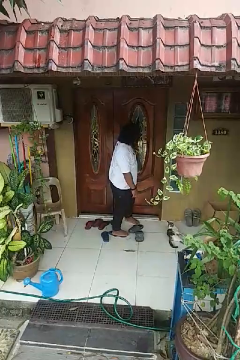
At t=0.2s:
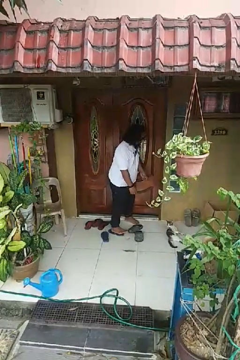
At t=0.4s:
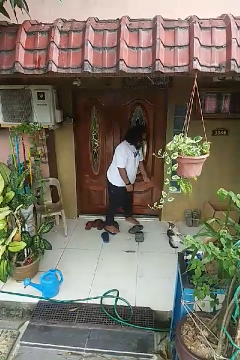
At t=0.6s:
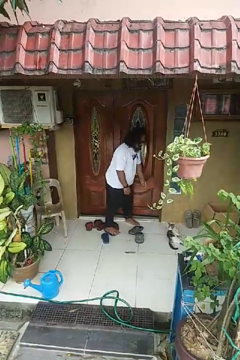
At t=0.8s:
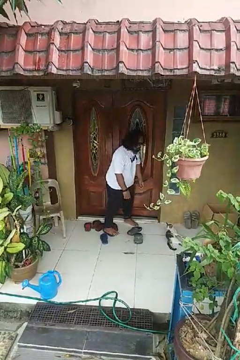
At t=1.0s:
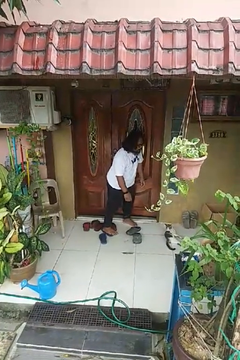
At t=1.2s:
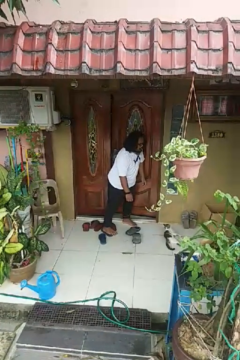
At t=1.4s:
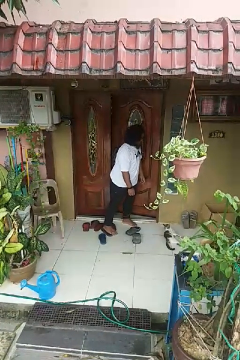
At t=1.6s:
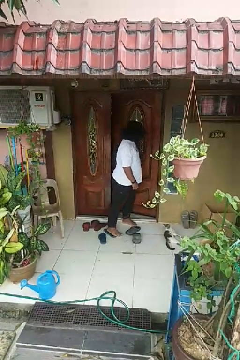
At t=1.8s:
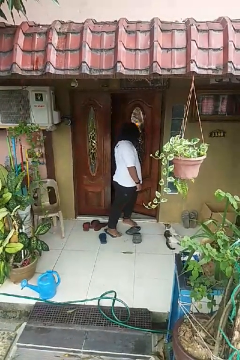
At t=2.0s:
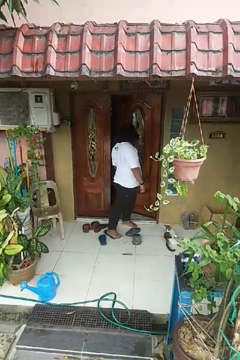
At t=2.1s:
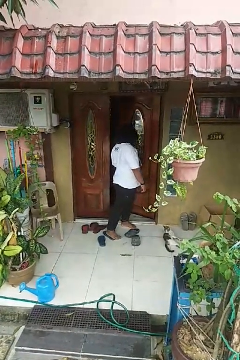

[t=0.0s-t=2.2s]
person opens facility door

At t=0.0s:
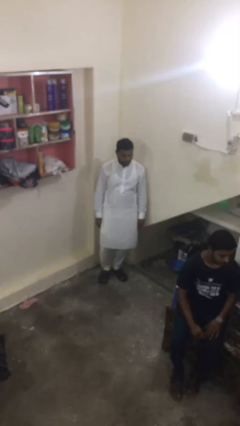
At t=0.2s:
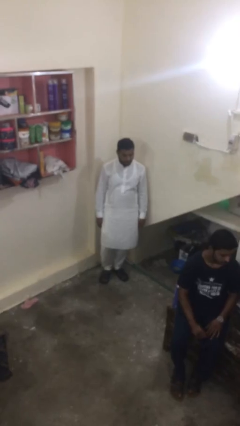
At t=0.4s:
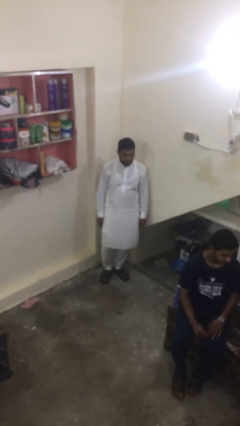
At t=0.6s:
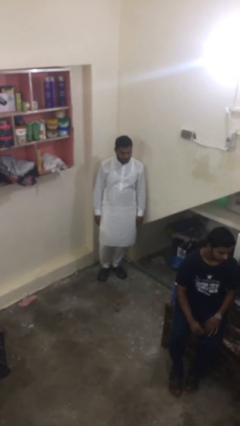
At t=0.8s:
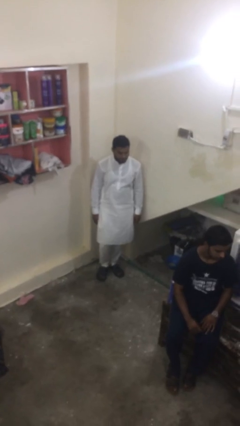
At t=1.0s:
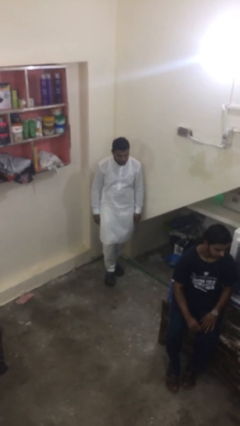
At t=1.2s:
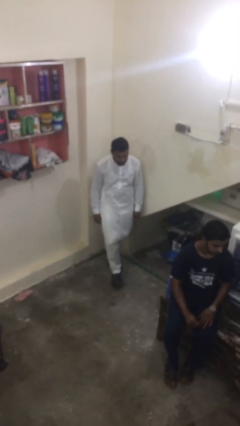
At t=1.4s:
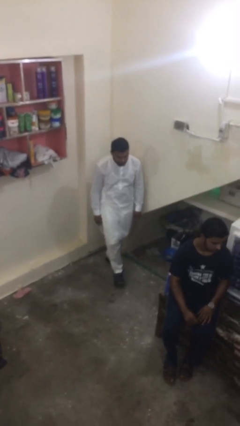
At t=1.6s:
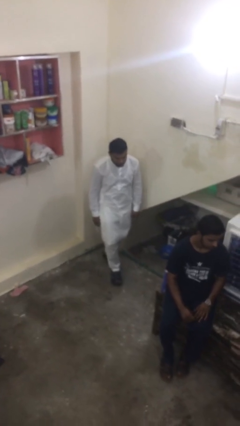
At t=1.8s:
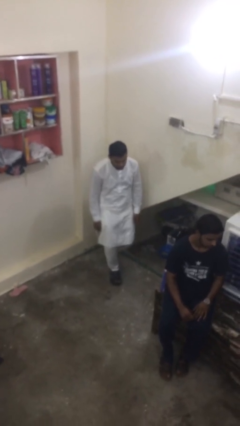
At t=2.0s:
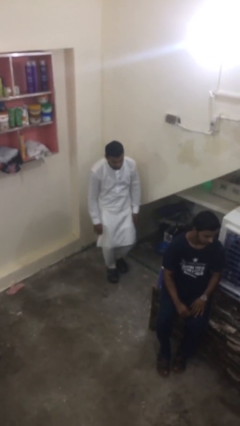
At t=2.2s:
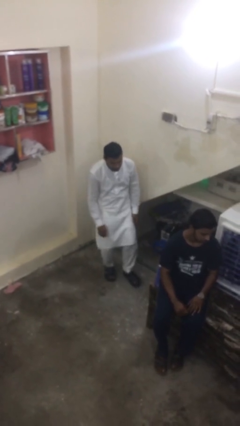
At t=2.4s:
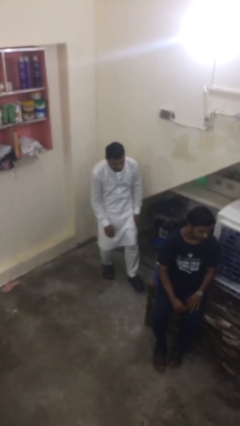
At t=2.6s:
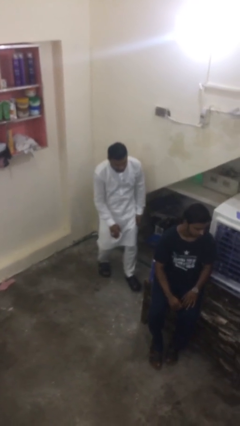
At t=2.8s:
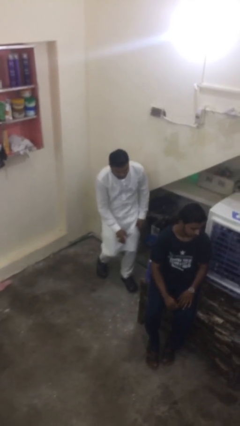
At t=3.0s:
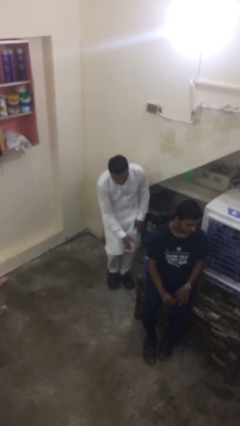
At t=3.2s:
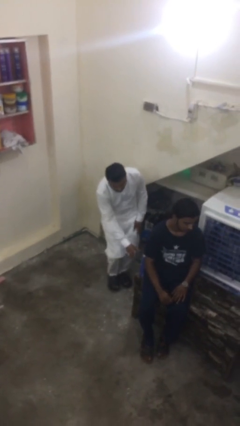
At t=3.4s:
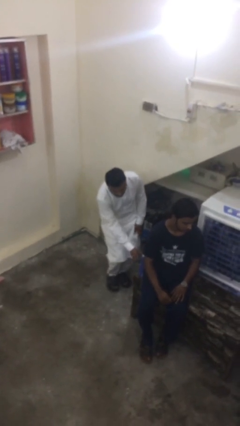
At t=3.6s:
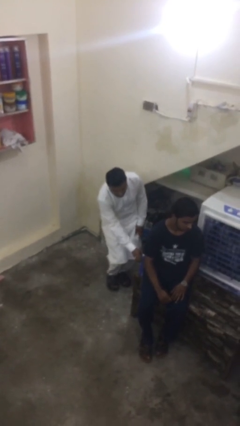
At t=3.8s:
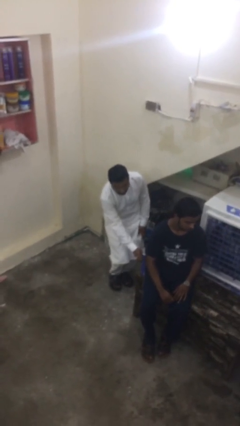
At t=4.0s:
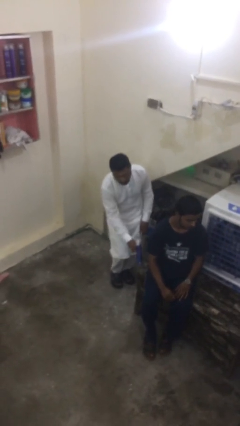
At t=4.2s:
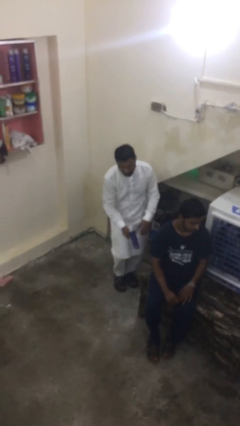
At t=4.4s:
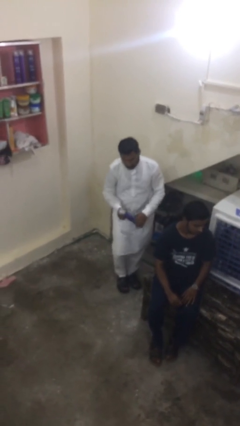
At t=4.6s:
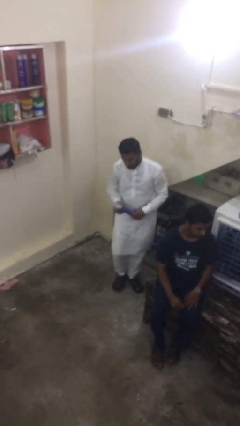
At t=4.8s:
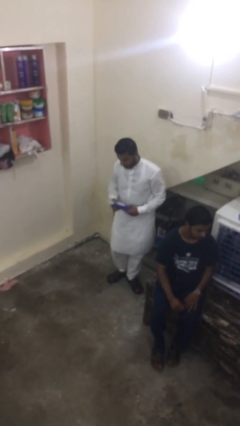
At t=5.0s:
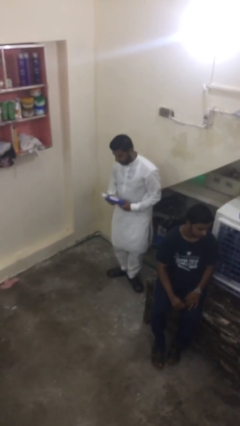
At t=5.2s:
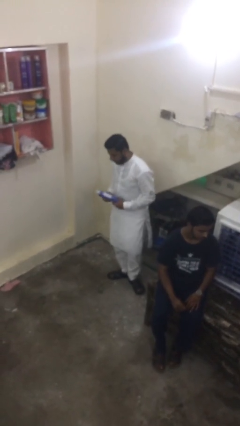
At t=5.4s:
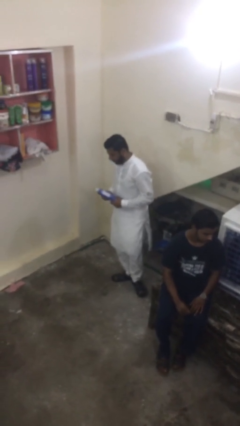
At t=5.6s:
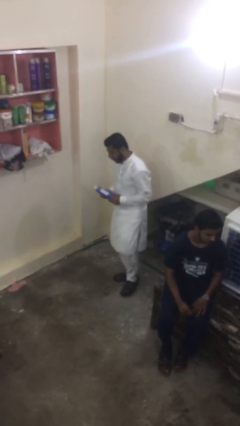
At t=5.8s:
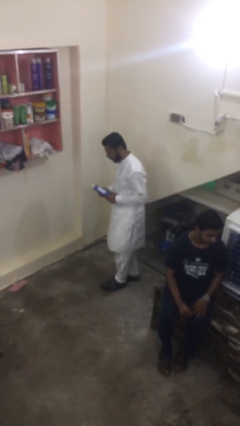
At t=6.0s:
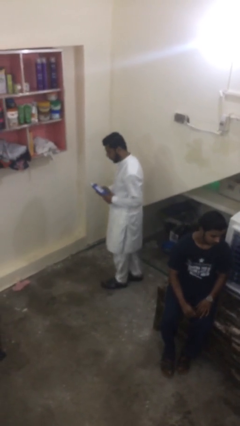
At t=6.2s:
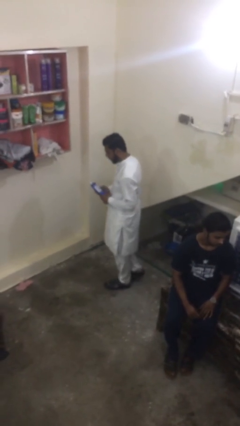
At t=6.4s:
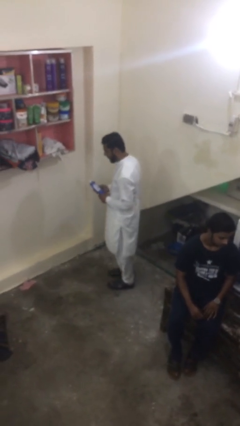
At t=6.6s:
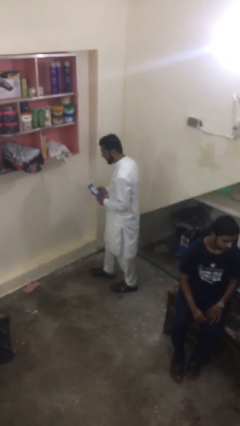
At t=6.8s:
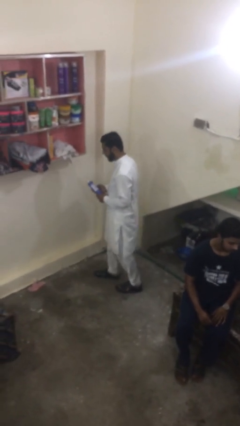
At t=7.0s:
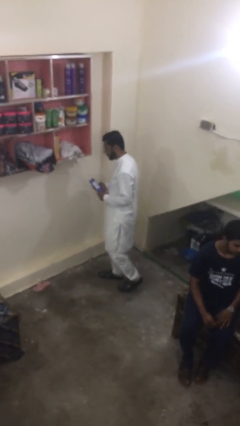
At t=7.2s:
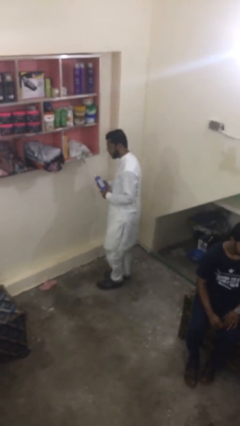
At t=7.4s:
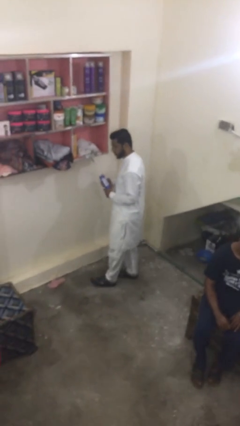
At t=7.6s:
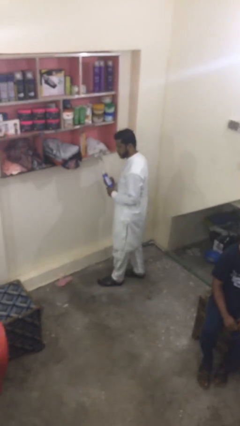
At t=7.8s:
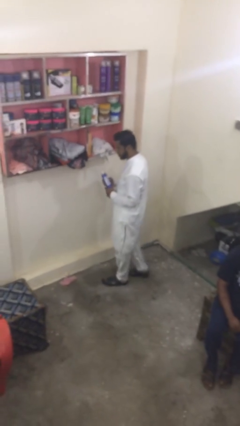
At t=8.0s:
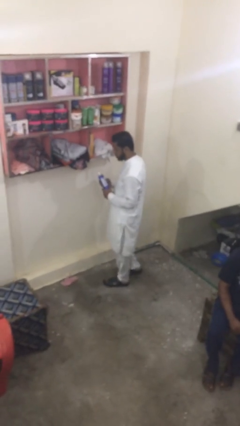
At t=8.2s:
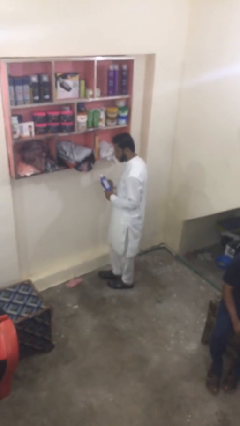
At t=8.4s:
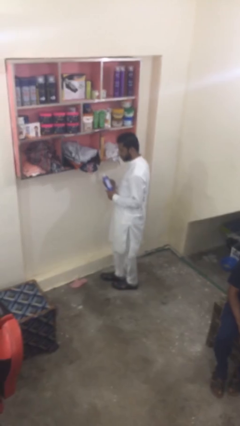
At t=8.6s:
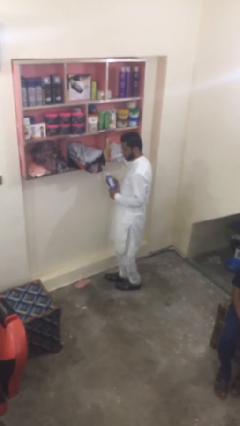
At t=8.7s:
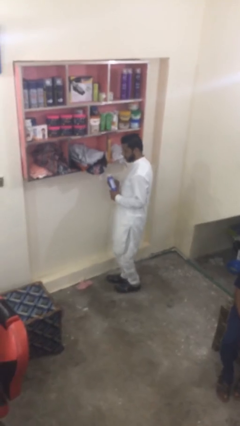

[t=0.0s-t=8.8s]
person steals object from person

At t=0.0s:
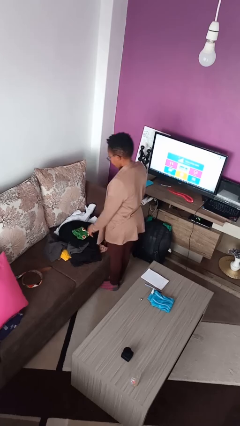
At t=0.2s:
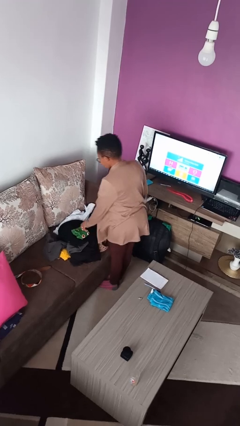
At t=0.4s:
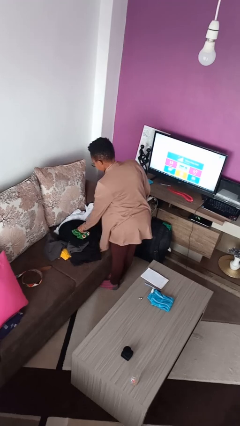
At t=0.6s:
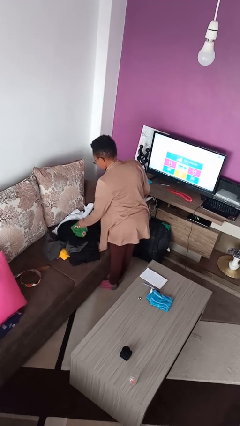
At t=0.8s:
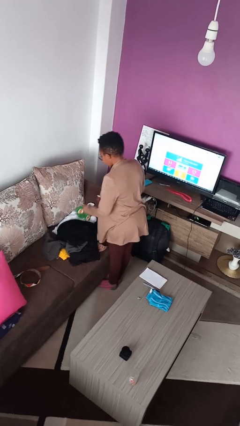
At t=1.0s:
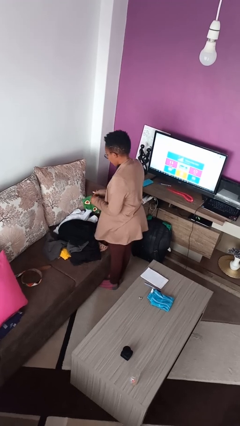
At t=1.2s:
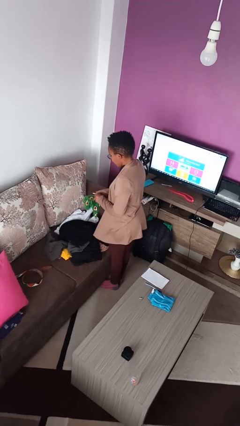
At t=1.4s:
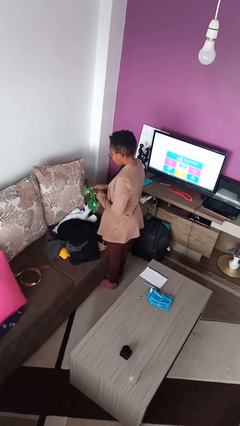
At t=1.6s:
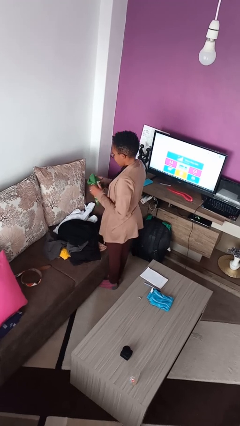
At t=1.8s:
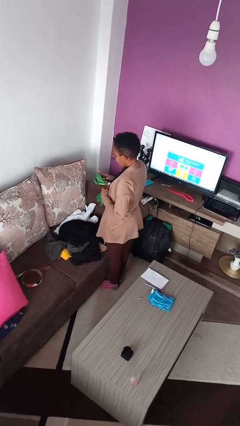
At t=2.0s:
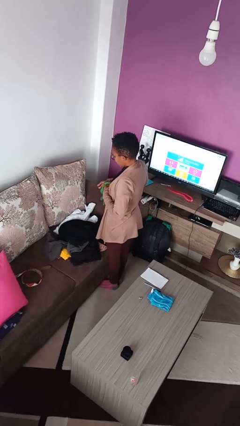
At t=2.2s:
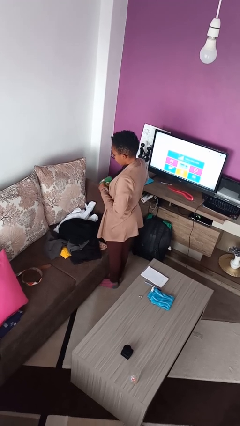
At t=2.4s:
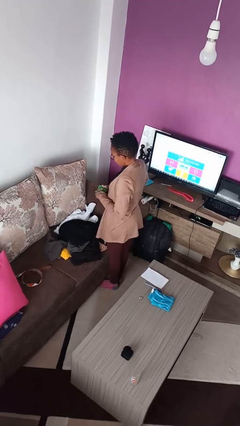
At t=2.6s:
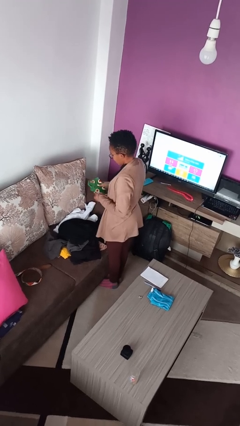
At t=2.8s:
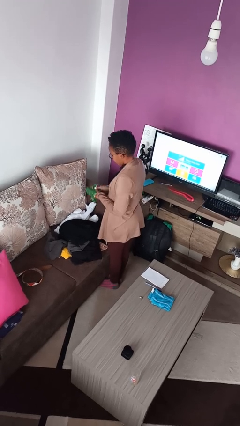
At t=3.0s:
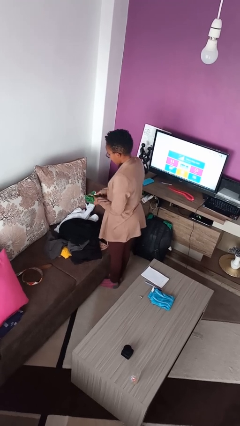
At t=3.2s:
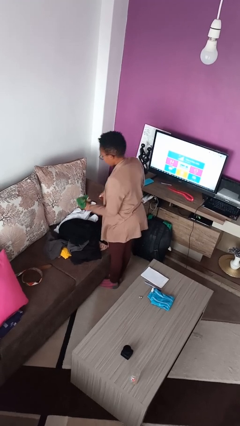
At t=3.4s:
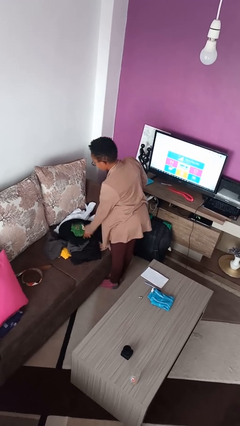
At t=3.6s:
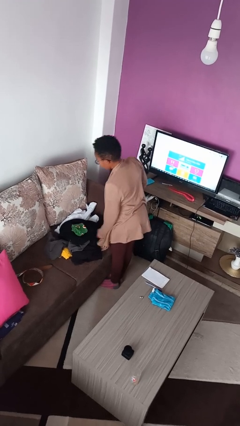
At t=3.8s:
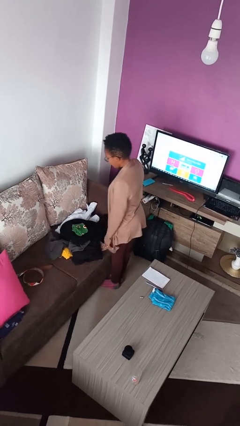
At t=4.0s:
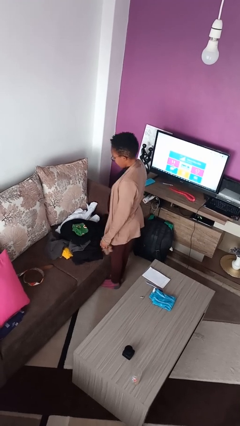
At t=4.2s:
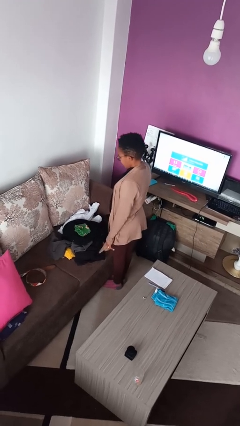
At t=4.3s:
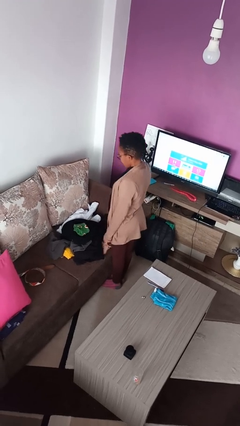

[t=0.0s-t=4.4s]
person folds socks

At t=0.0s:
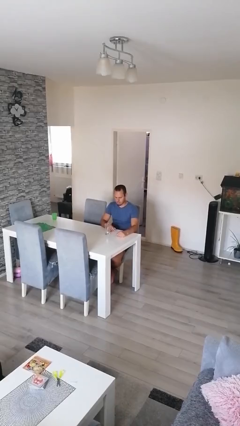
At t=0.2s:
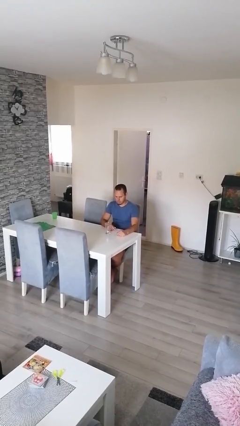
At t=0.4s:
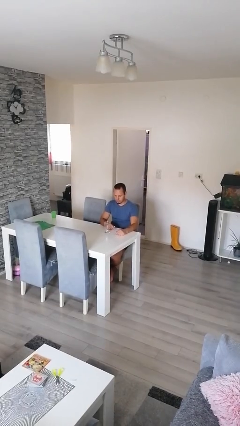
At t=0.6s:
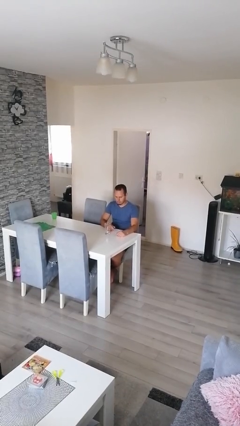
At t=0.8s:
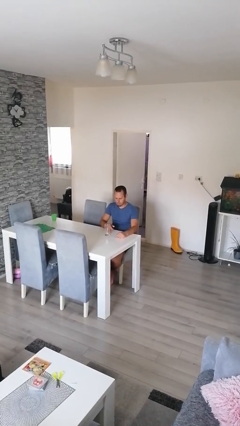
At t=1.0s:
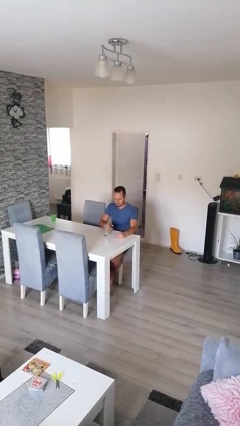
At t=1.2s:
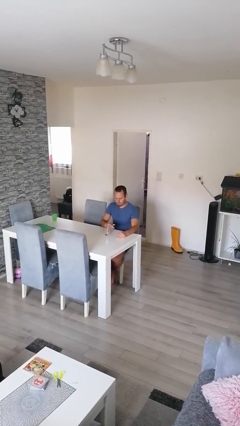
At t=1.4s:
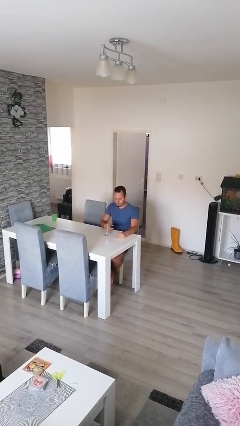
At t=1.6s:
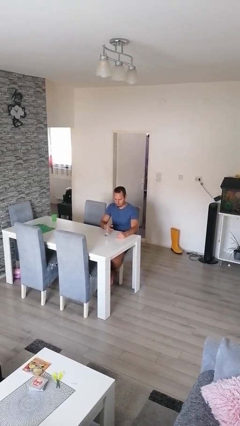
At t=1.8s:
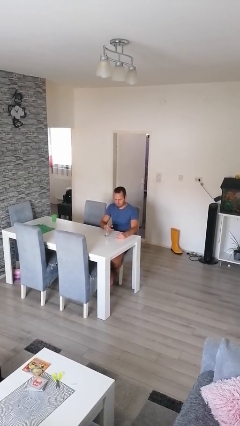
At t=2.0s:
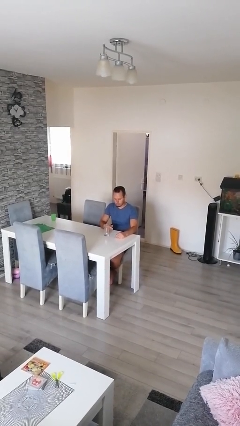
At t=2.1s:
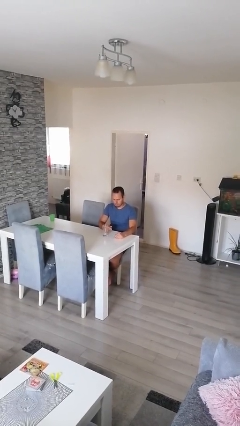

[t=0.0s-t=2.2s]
person knocks over glass

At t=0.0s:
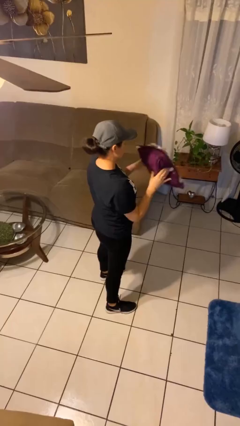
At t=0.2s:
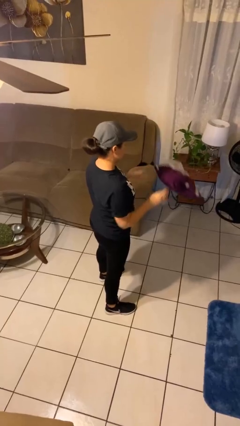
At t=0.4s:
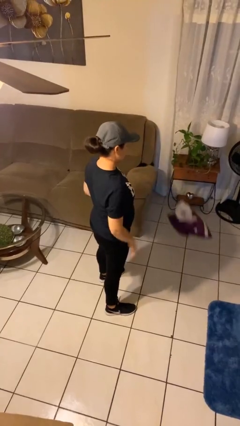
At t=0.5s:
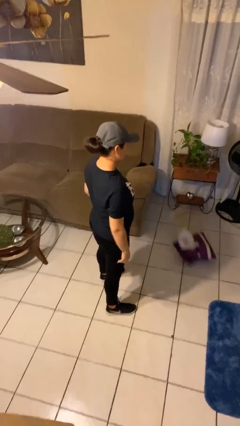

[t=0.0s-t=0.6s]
person throws object to ground
